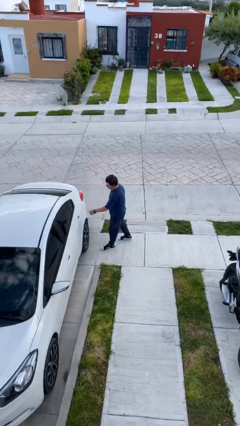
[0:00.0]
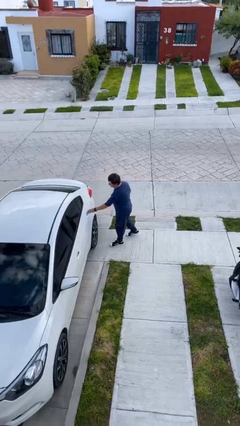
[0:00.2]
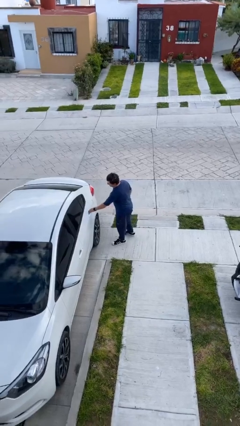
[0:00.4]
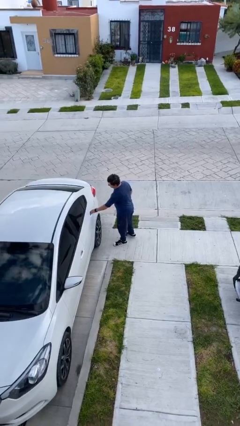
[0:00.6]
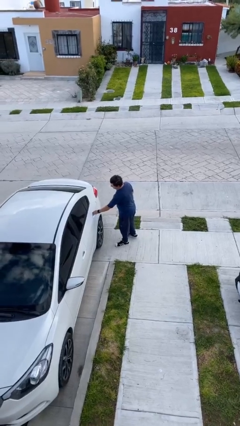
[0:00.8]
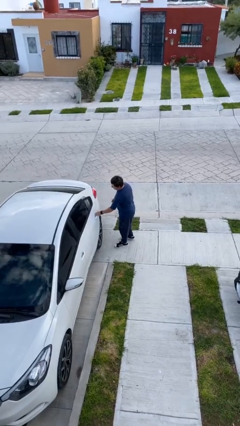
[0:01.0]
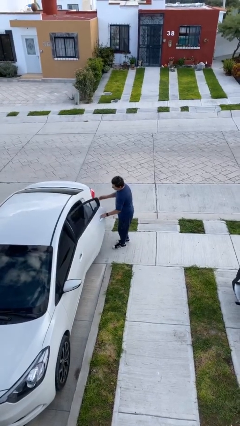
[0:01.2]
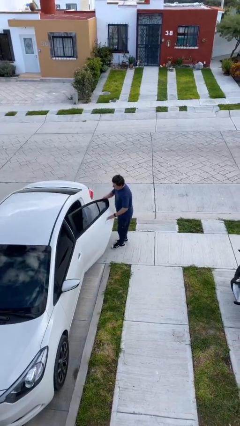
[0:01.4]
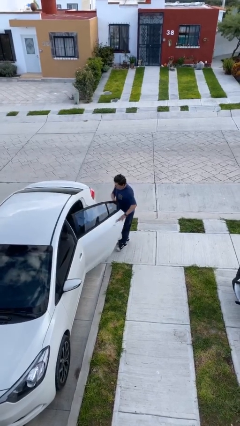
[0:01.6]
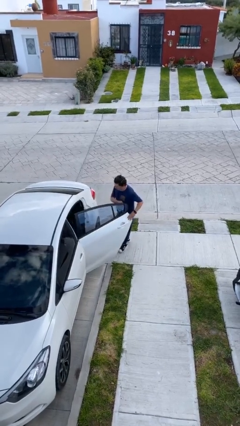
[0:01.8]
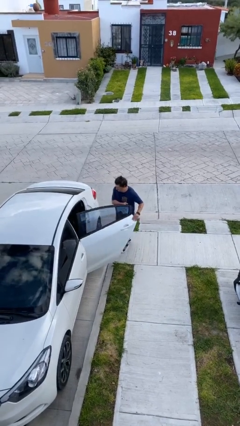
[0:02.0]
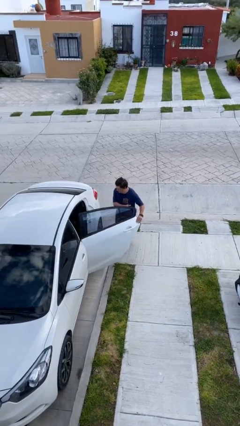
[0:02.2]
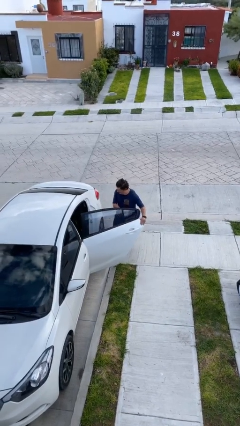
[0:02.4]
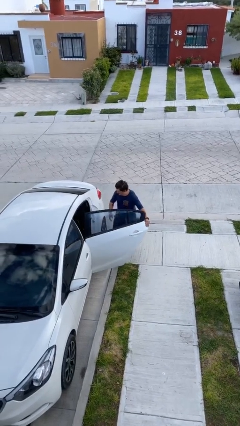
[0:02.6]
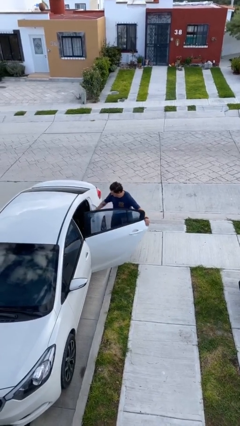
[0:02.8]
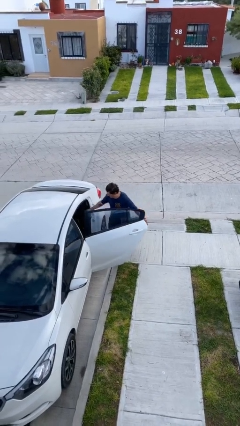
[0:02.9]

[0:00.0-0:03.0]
person opens car door

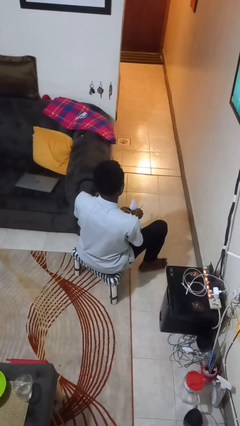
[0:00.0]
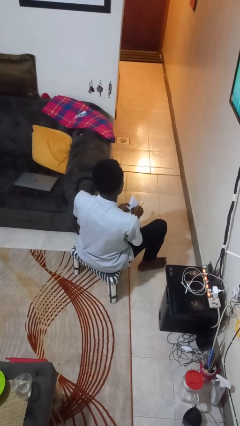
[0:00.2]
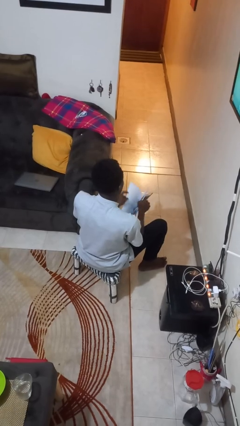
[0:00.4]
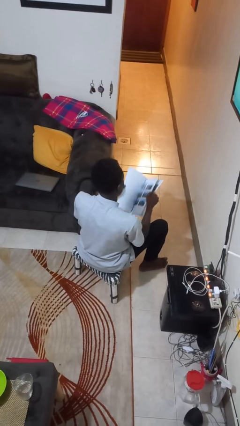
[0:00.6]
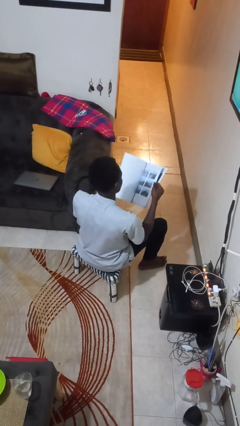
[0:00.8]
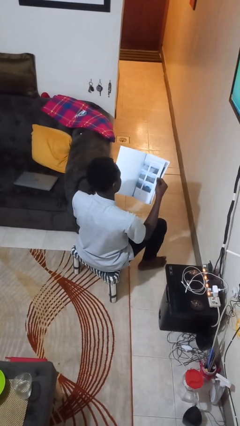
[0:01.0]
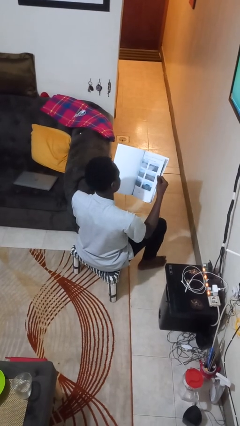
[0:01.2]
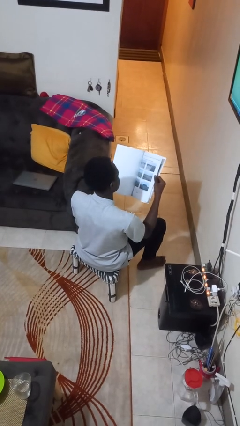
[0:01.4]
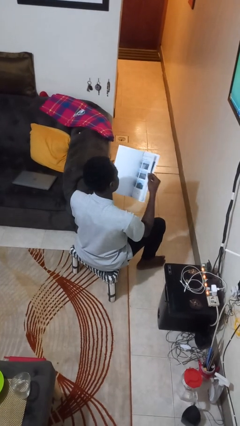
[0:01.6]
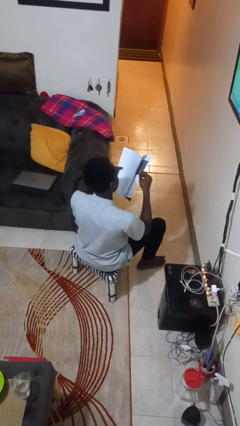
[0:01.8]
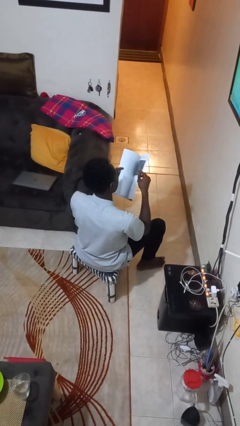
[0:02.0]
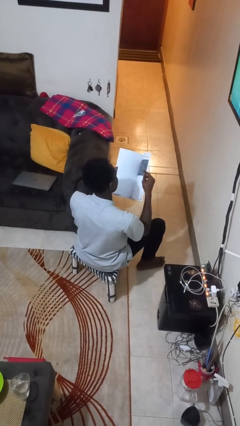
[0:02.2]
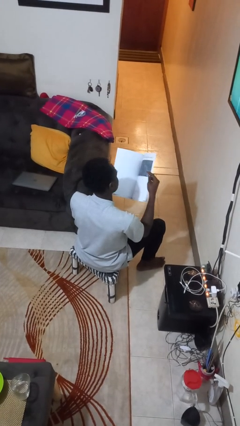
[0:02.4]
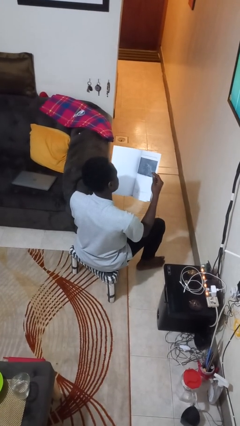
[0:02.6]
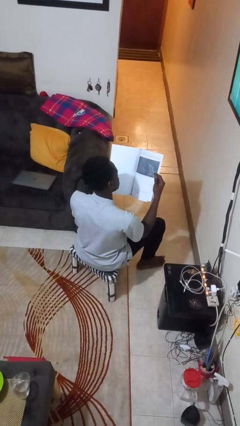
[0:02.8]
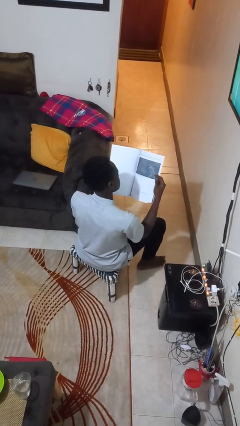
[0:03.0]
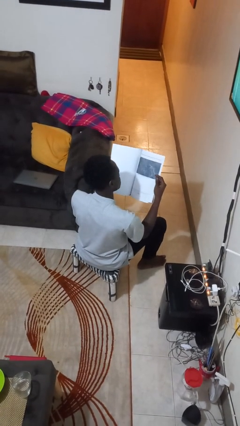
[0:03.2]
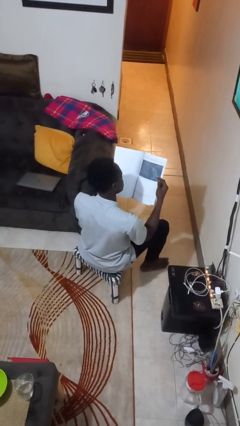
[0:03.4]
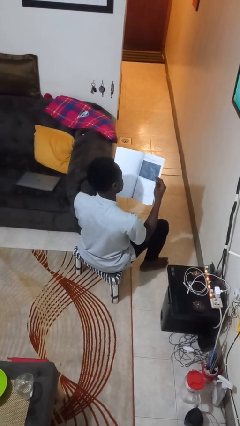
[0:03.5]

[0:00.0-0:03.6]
person reads magazine

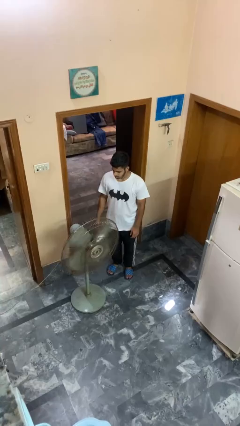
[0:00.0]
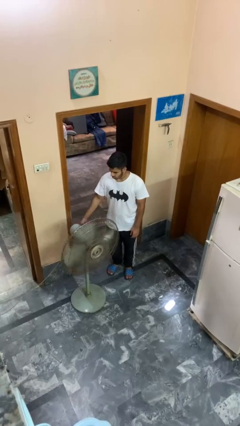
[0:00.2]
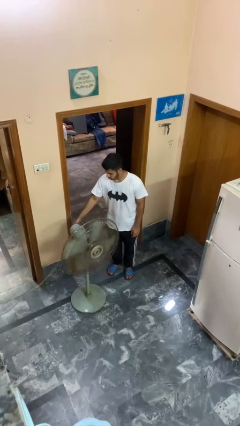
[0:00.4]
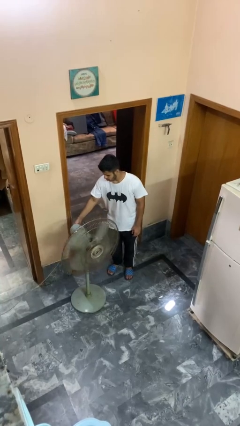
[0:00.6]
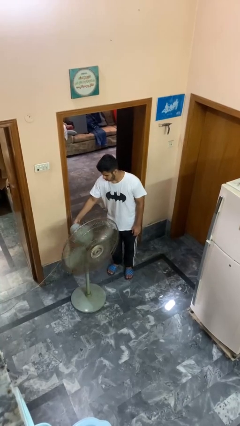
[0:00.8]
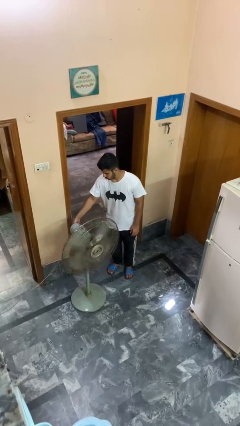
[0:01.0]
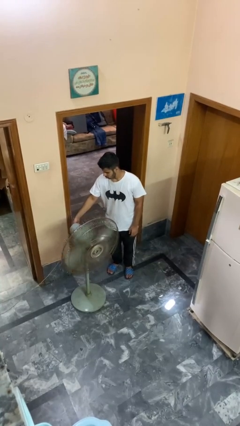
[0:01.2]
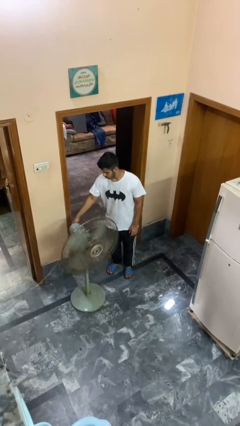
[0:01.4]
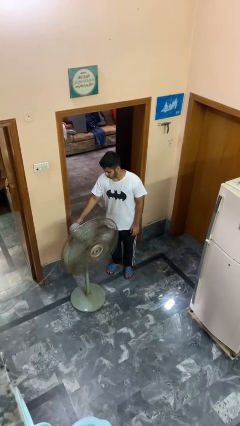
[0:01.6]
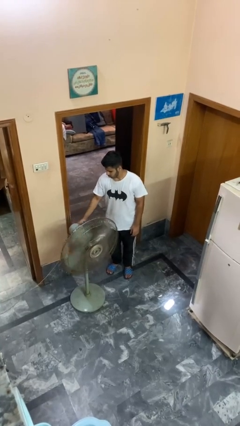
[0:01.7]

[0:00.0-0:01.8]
person turns on fan

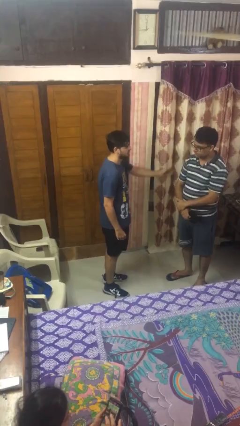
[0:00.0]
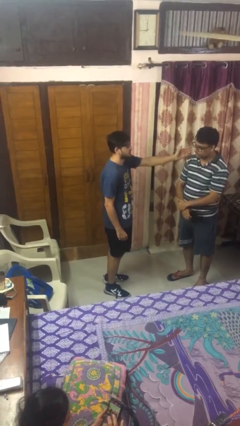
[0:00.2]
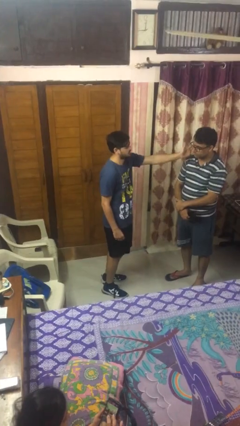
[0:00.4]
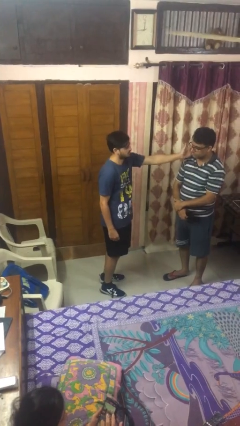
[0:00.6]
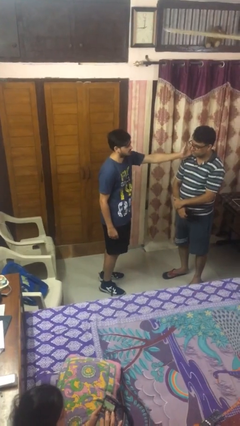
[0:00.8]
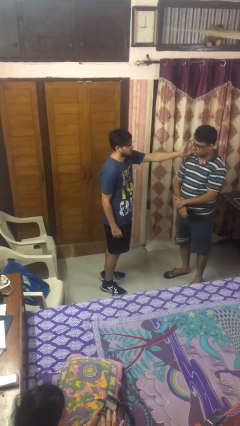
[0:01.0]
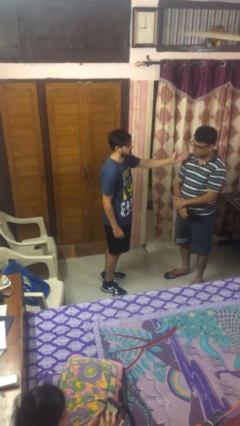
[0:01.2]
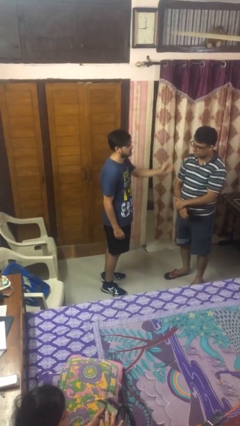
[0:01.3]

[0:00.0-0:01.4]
person touches face of person

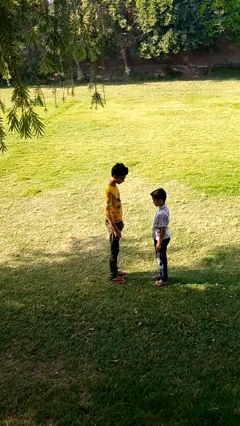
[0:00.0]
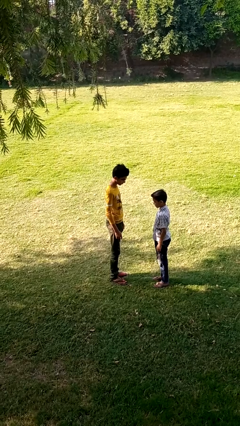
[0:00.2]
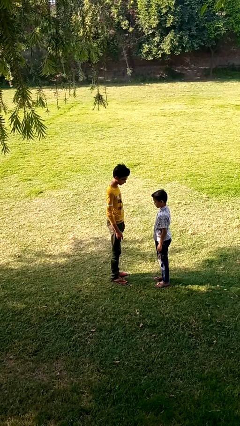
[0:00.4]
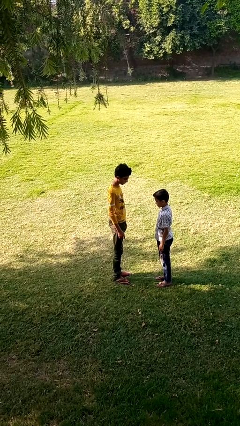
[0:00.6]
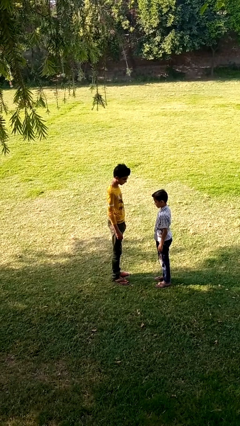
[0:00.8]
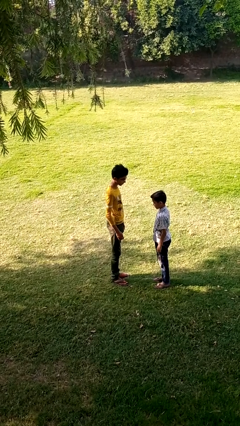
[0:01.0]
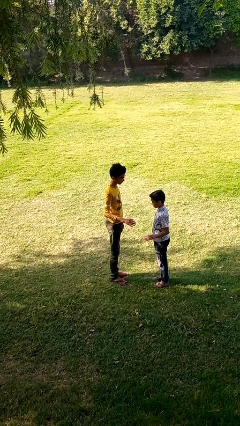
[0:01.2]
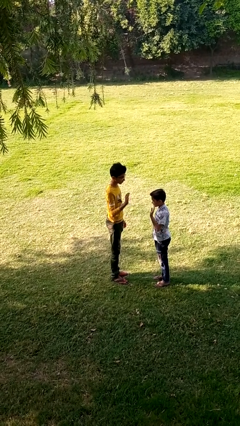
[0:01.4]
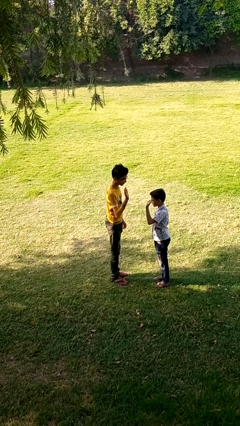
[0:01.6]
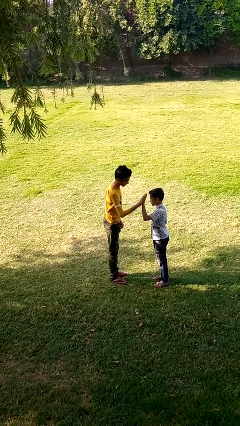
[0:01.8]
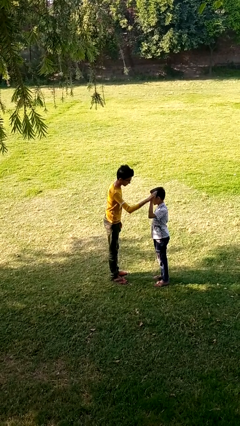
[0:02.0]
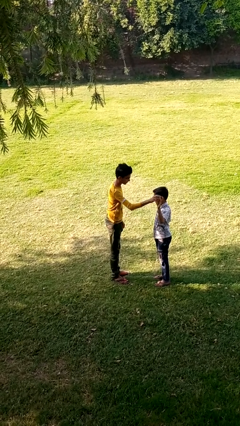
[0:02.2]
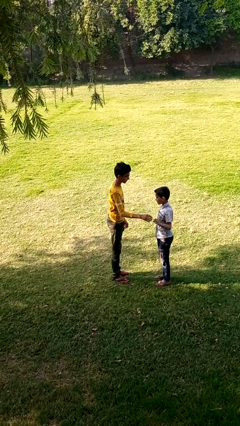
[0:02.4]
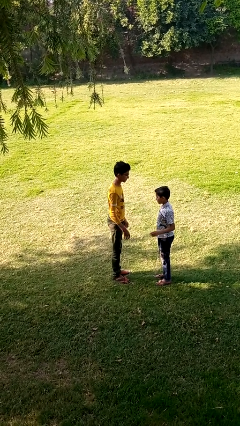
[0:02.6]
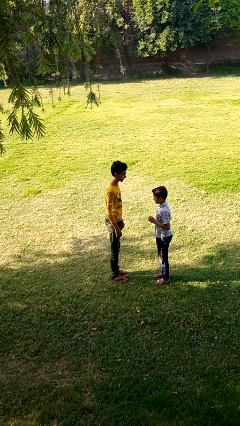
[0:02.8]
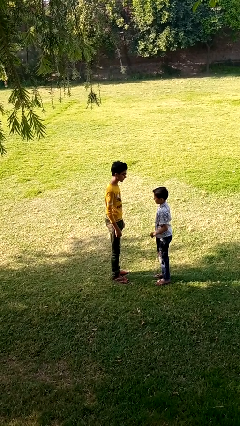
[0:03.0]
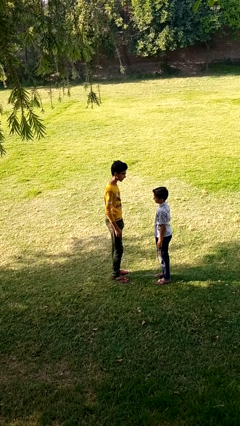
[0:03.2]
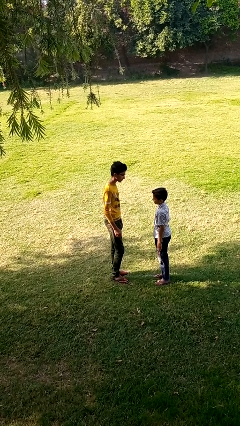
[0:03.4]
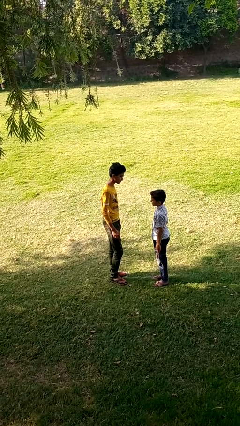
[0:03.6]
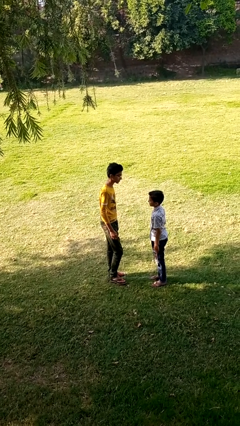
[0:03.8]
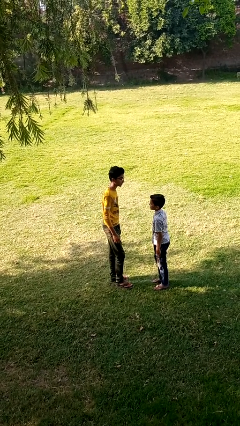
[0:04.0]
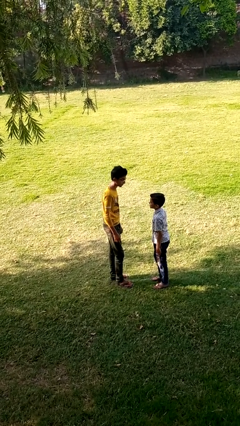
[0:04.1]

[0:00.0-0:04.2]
person highfives hand

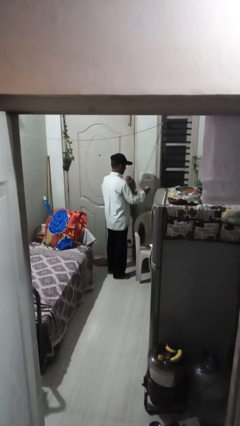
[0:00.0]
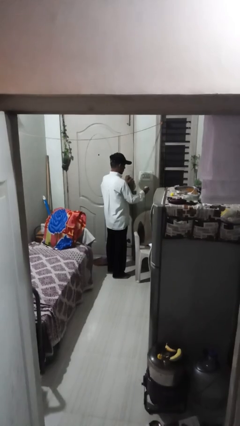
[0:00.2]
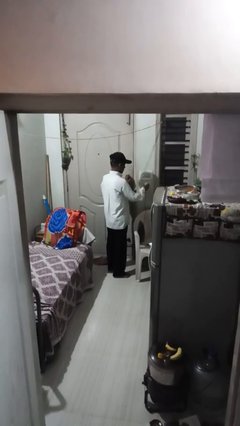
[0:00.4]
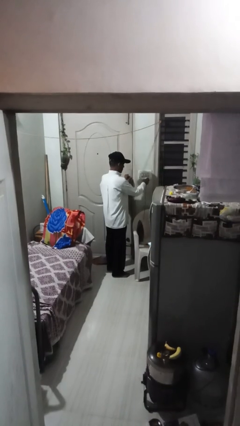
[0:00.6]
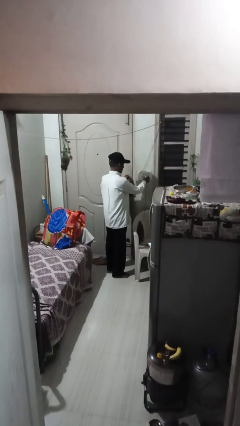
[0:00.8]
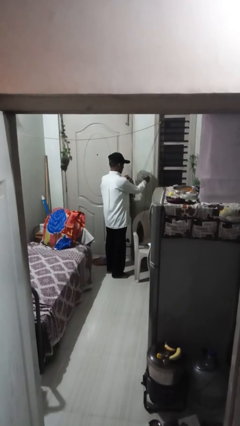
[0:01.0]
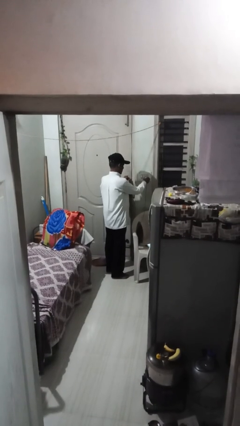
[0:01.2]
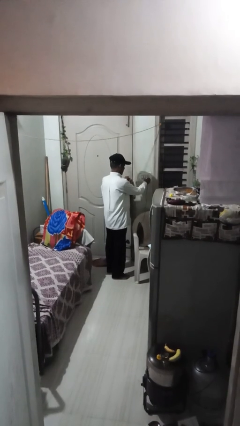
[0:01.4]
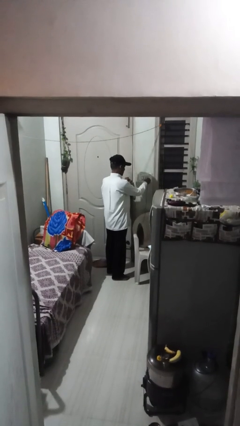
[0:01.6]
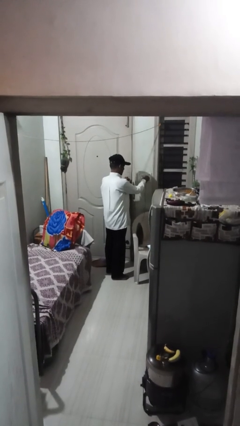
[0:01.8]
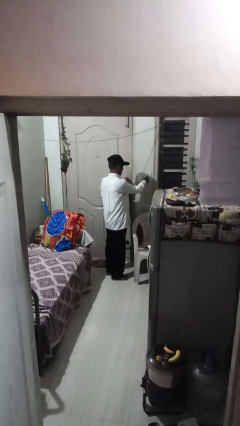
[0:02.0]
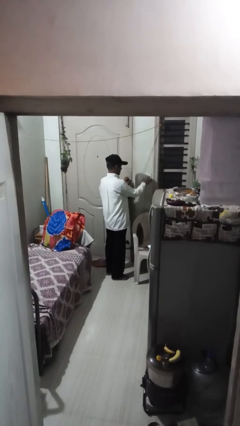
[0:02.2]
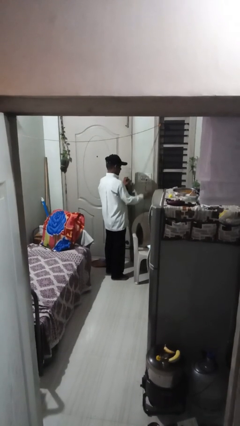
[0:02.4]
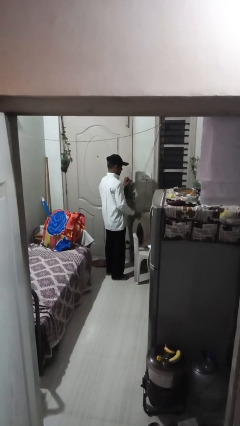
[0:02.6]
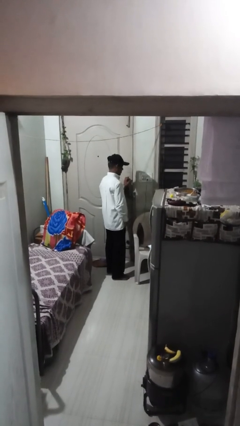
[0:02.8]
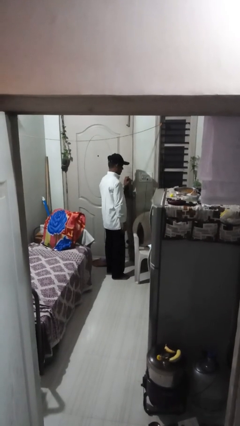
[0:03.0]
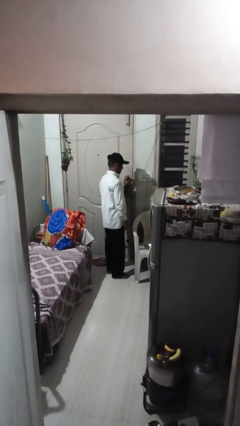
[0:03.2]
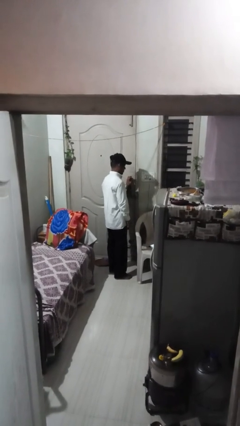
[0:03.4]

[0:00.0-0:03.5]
person plugs into electrical socket

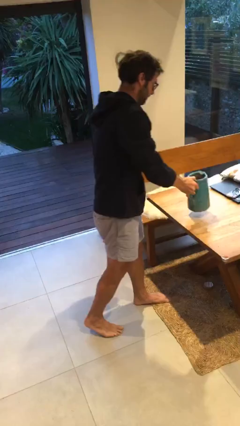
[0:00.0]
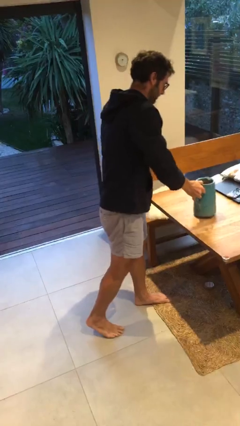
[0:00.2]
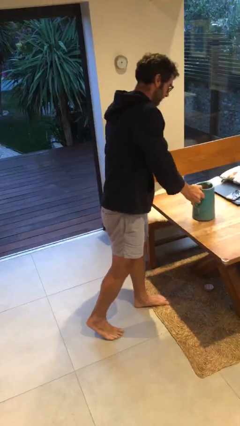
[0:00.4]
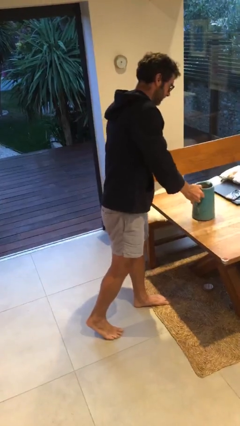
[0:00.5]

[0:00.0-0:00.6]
person puts down object on table
